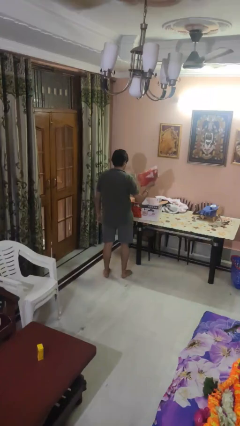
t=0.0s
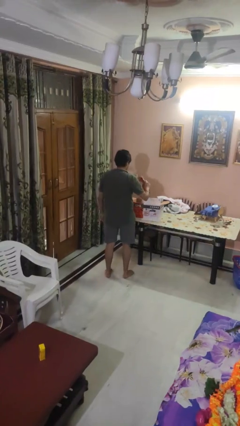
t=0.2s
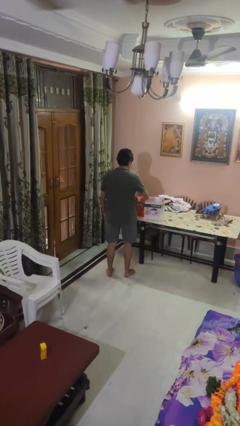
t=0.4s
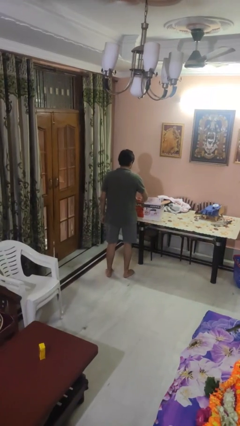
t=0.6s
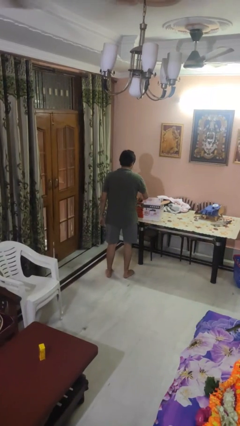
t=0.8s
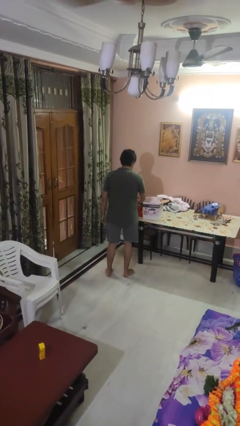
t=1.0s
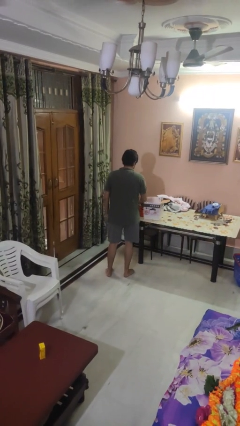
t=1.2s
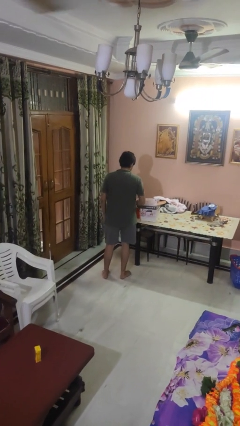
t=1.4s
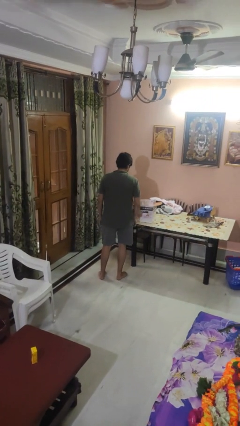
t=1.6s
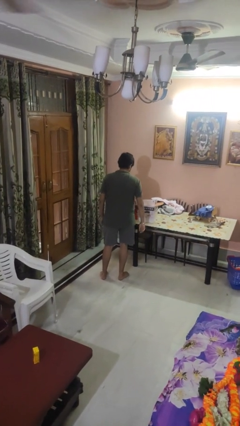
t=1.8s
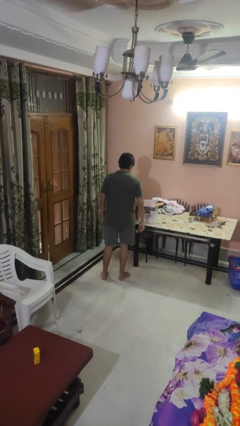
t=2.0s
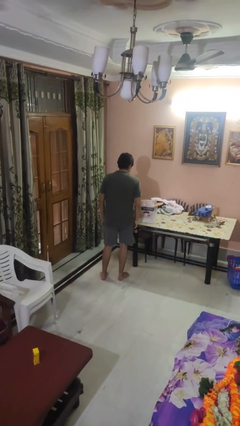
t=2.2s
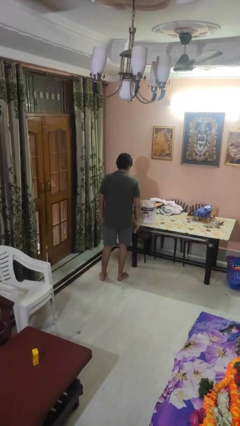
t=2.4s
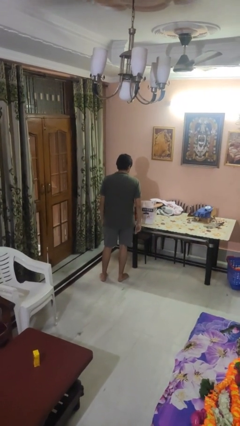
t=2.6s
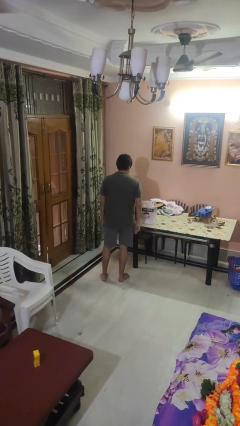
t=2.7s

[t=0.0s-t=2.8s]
person puts object into box

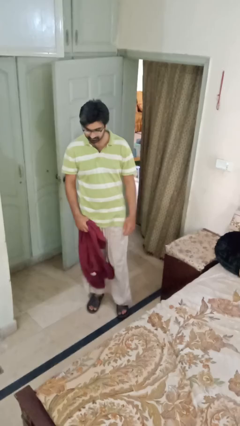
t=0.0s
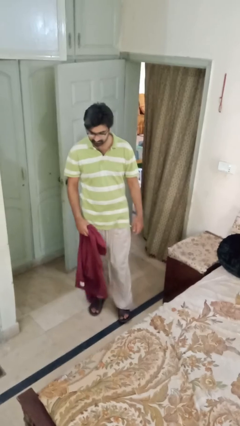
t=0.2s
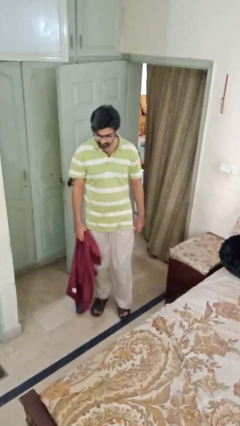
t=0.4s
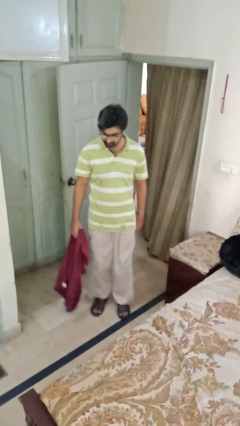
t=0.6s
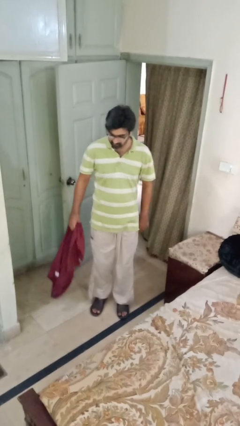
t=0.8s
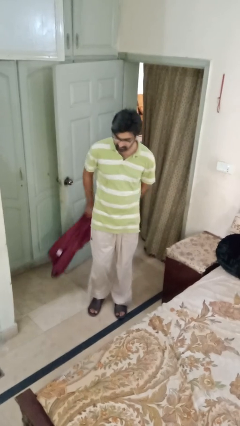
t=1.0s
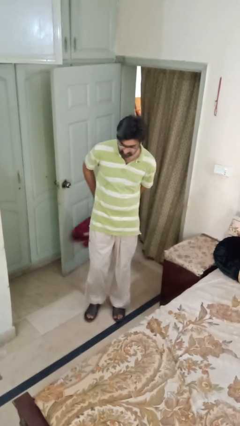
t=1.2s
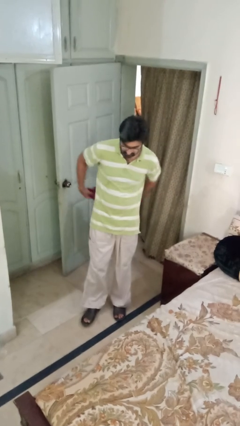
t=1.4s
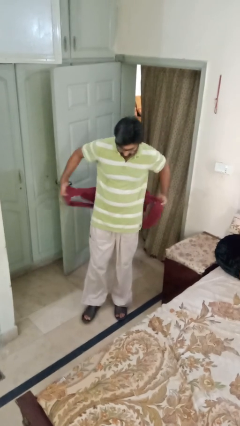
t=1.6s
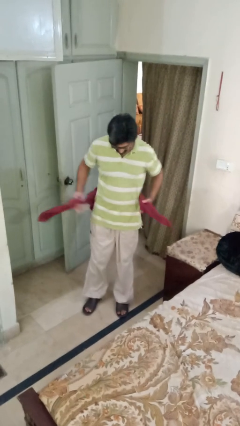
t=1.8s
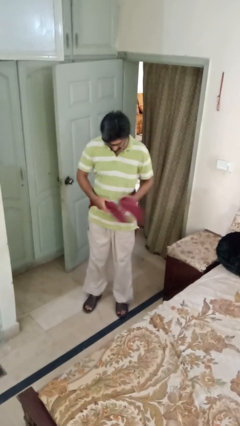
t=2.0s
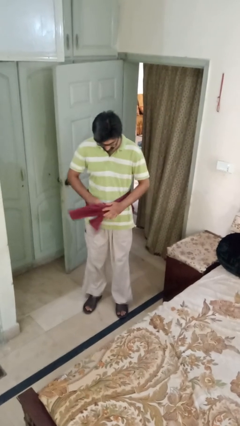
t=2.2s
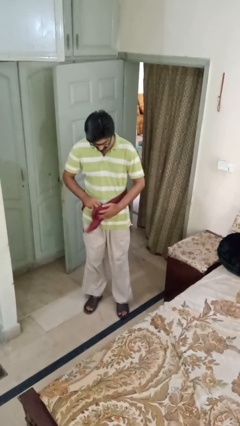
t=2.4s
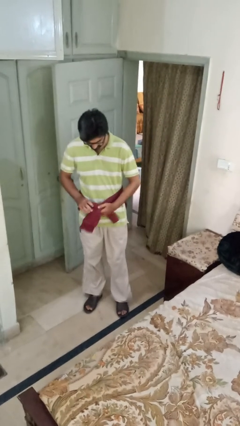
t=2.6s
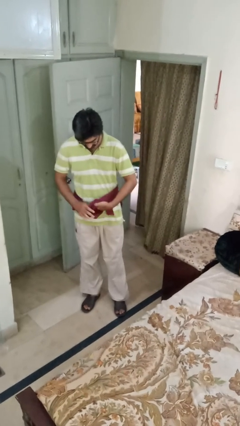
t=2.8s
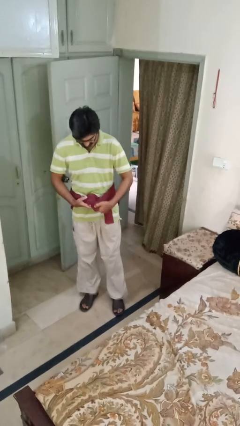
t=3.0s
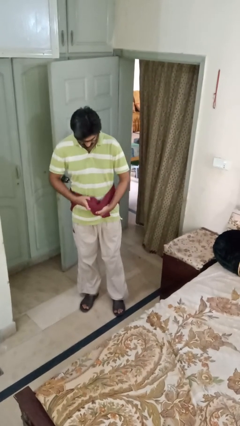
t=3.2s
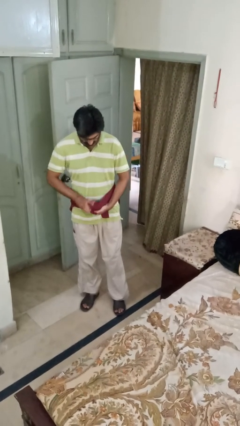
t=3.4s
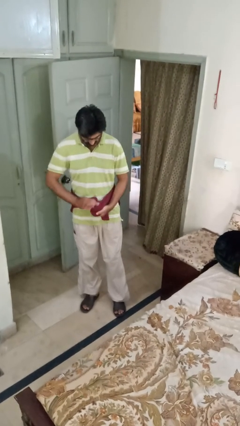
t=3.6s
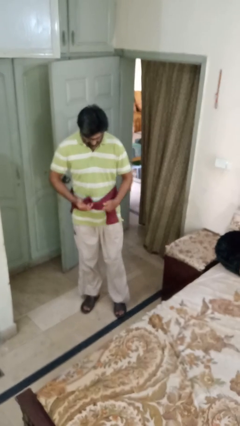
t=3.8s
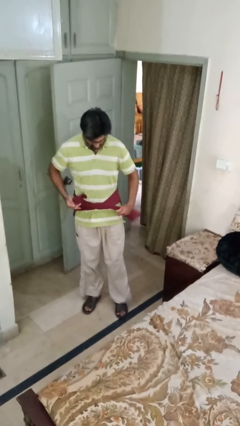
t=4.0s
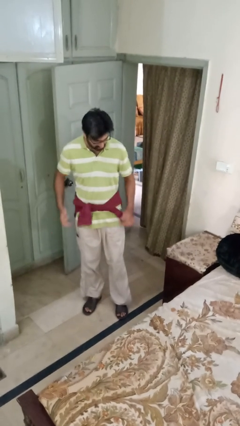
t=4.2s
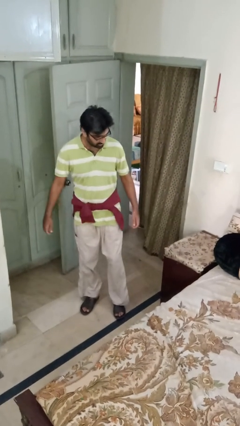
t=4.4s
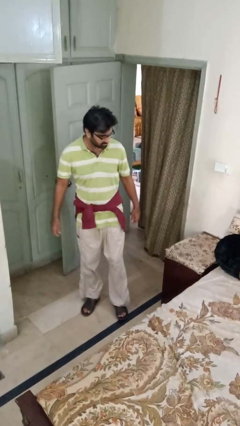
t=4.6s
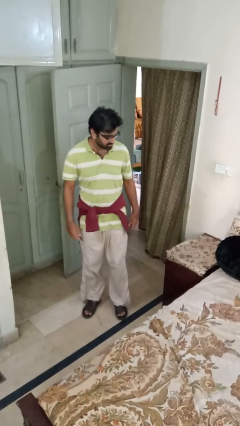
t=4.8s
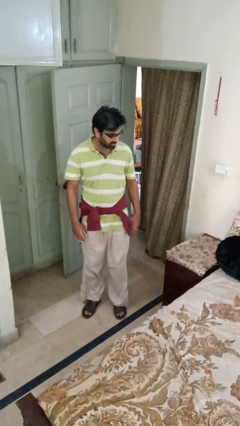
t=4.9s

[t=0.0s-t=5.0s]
person ties jacket around waist

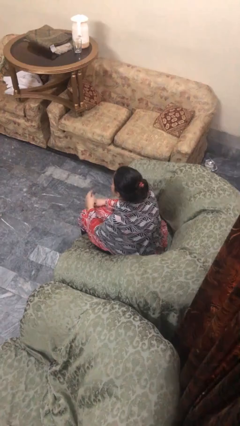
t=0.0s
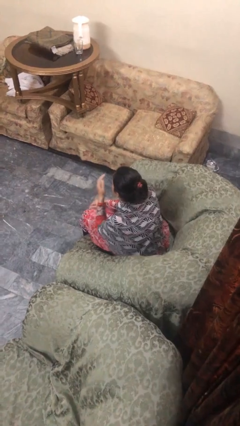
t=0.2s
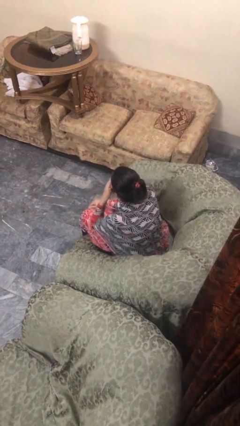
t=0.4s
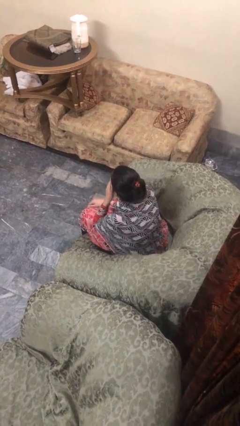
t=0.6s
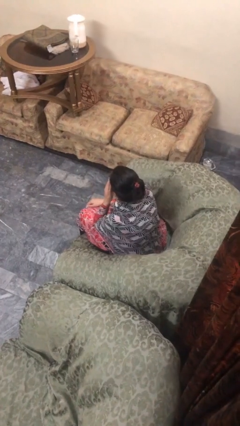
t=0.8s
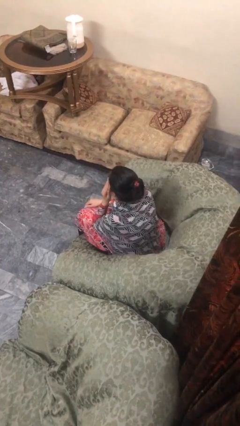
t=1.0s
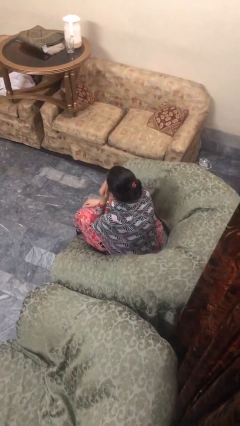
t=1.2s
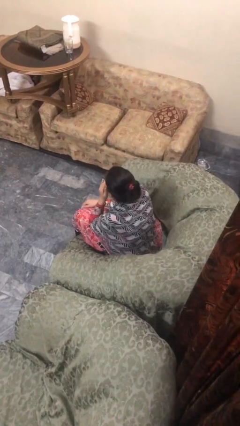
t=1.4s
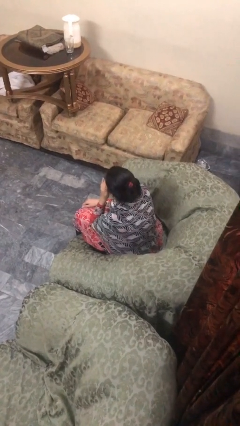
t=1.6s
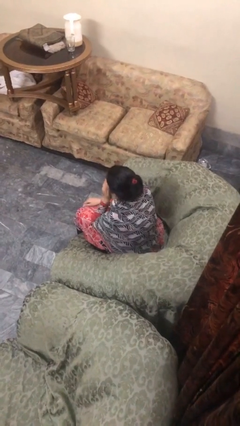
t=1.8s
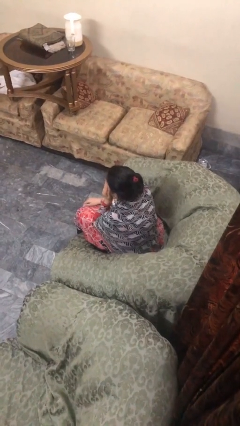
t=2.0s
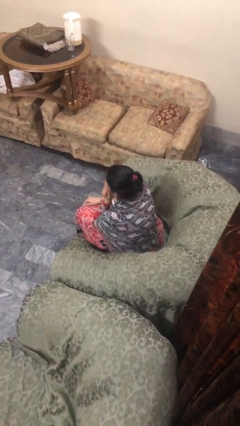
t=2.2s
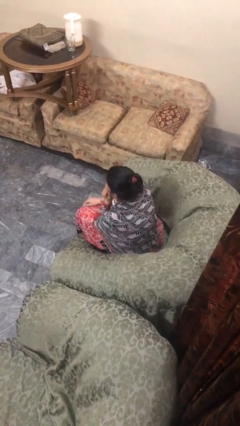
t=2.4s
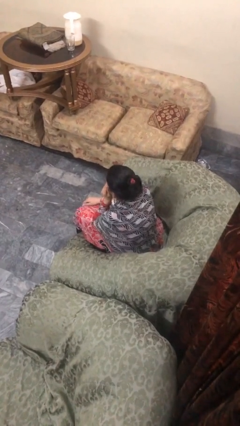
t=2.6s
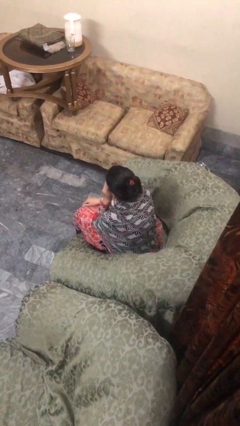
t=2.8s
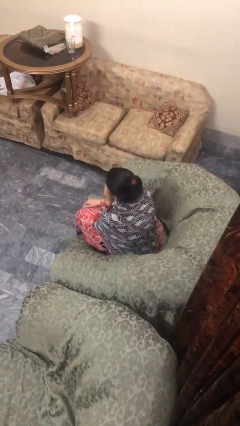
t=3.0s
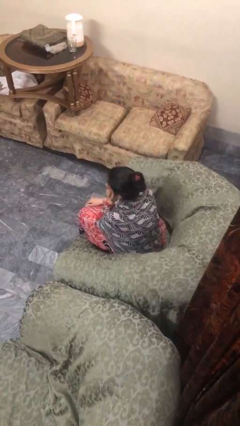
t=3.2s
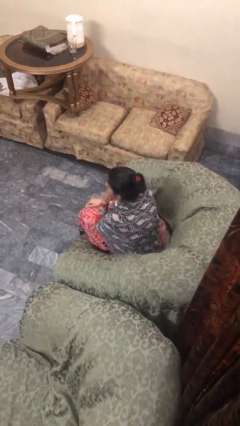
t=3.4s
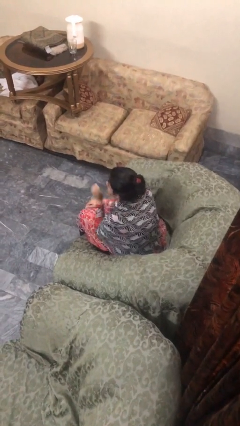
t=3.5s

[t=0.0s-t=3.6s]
person rubs eyes

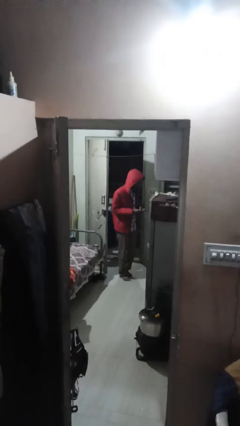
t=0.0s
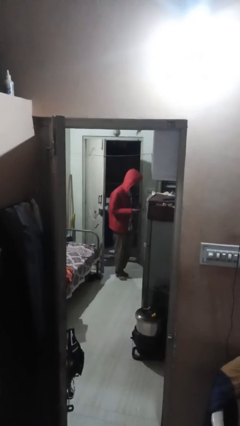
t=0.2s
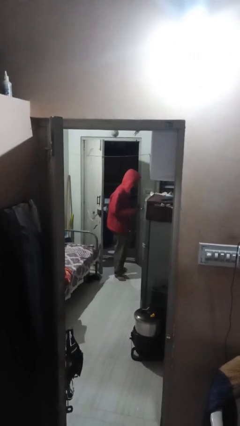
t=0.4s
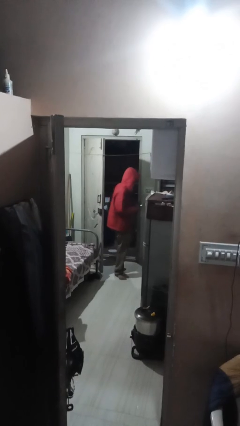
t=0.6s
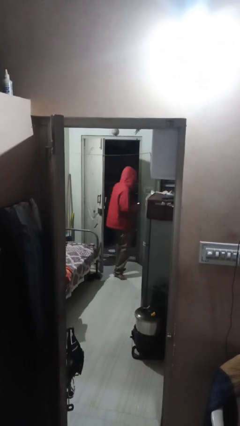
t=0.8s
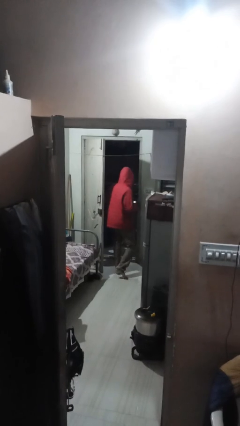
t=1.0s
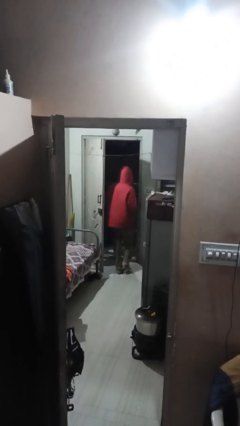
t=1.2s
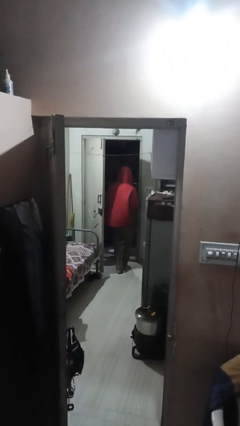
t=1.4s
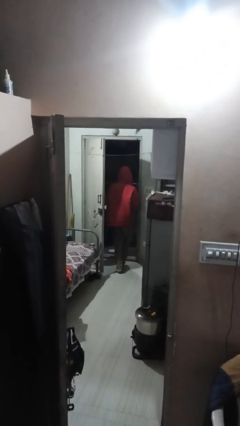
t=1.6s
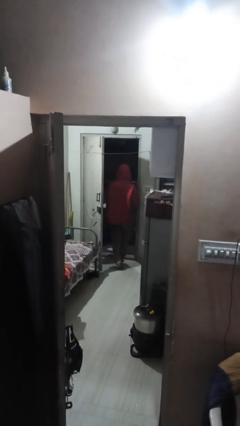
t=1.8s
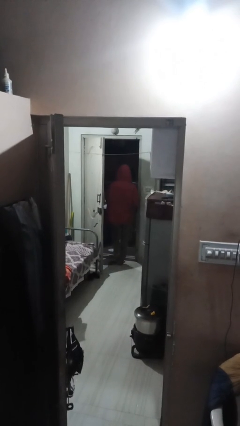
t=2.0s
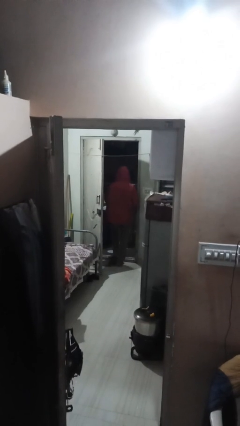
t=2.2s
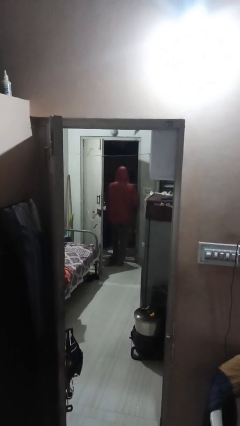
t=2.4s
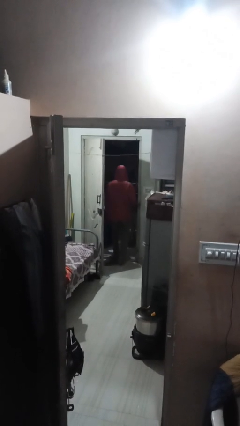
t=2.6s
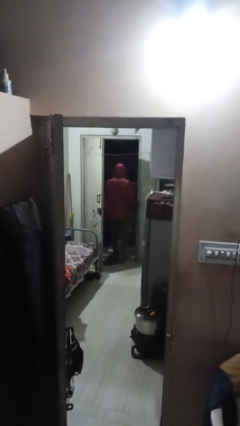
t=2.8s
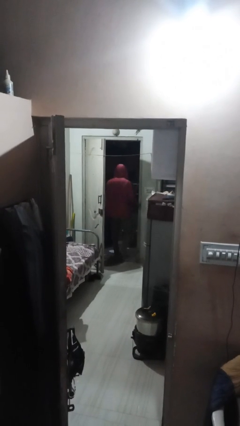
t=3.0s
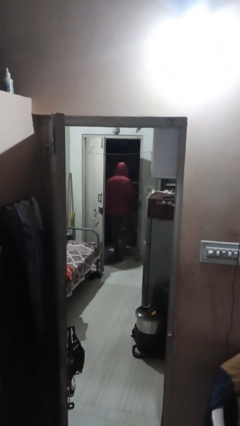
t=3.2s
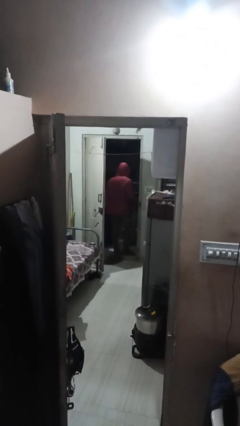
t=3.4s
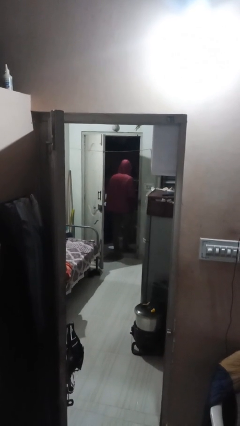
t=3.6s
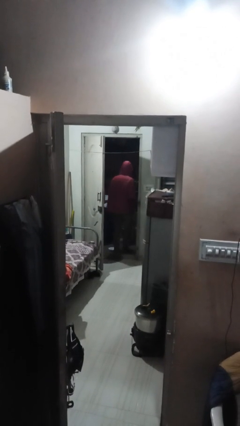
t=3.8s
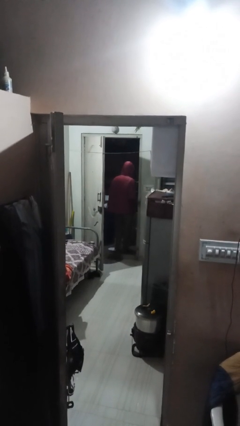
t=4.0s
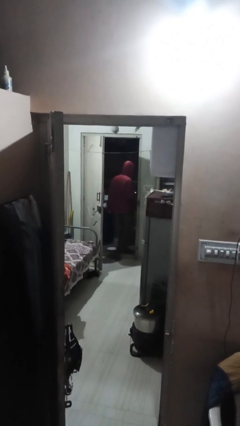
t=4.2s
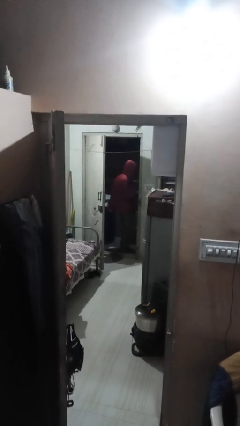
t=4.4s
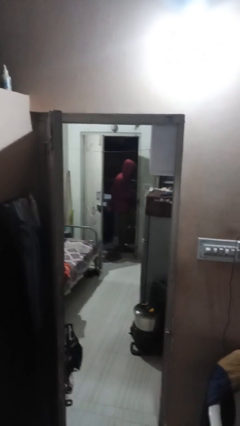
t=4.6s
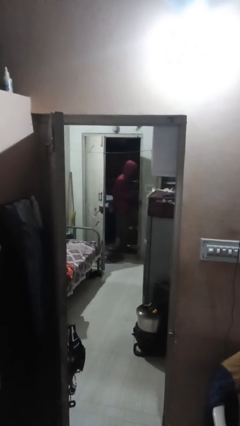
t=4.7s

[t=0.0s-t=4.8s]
person exits scene through structure

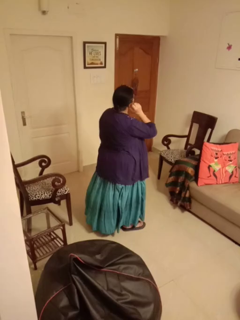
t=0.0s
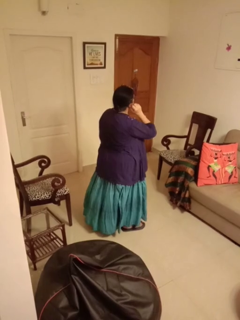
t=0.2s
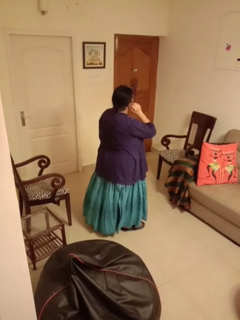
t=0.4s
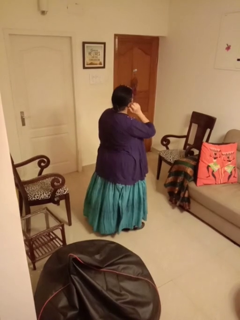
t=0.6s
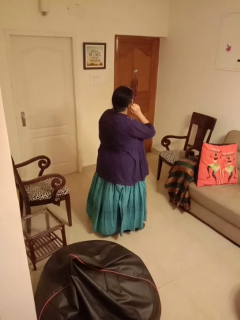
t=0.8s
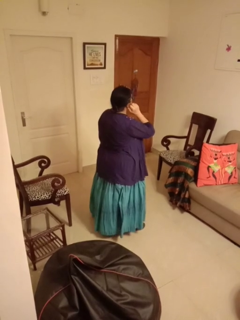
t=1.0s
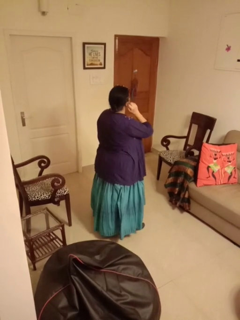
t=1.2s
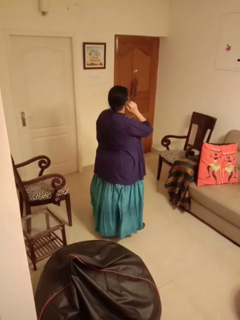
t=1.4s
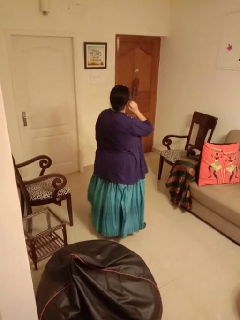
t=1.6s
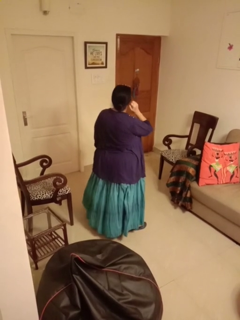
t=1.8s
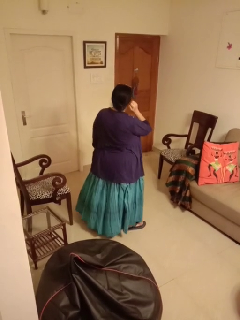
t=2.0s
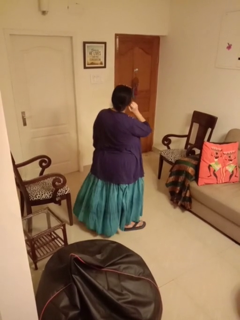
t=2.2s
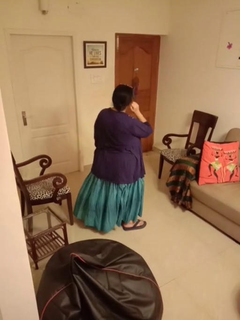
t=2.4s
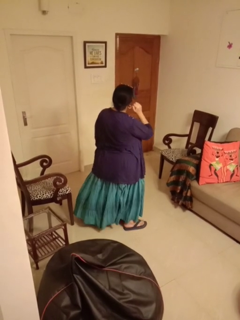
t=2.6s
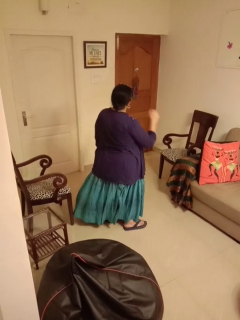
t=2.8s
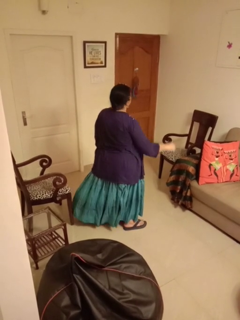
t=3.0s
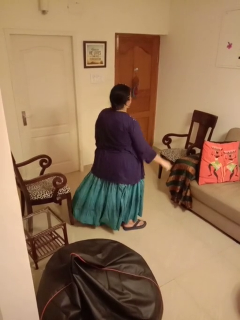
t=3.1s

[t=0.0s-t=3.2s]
person touches earlobe
